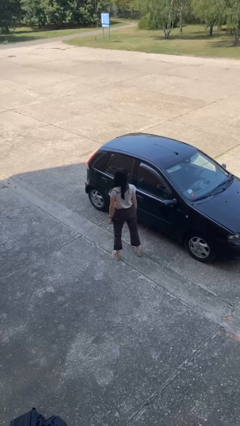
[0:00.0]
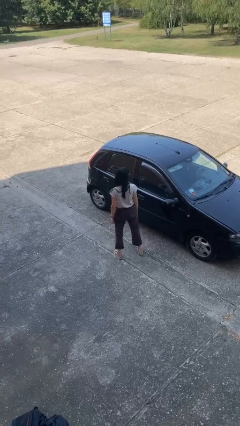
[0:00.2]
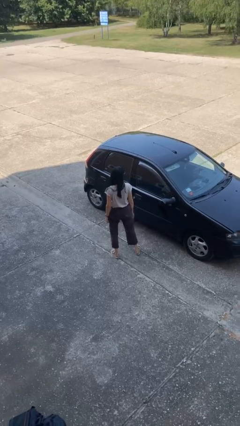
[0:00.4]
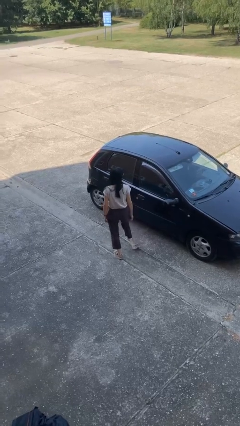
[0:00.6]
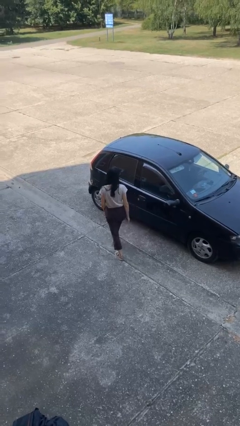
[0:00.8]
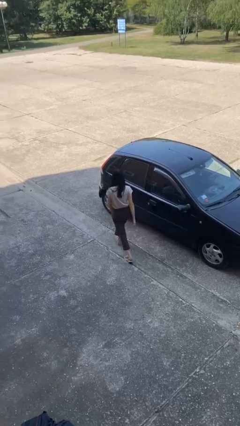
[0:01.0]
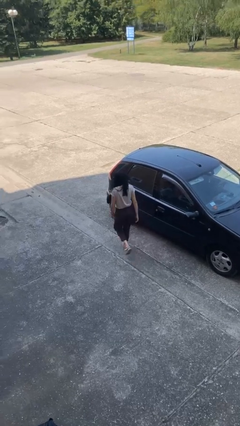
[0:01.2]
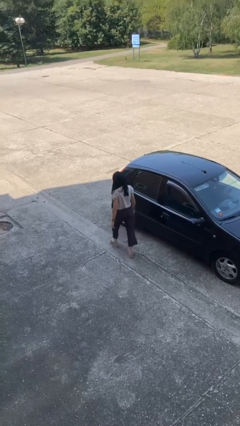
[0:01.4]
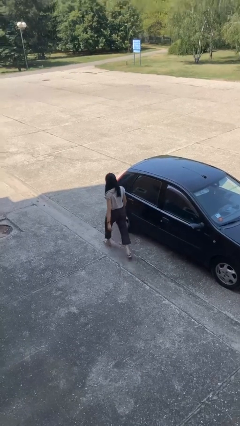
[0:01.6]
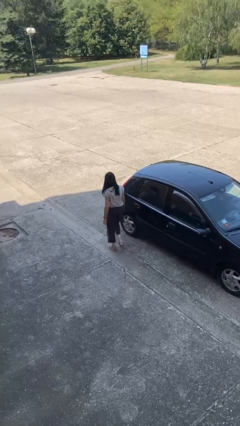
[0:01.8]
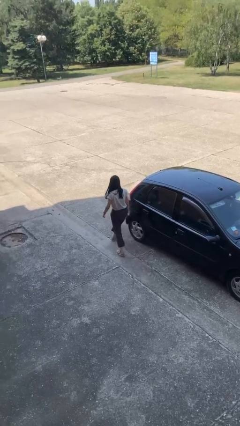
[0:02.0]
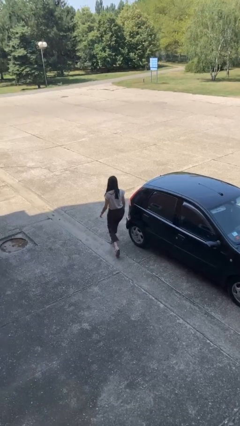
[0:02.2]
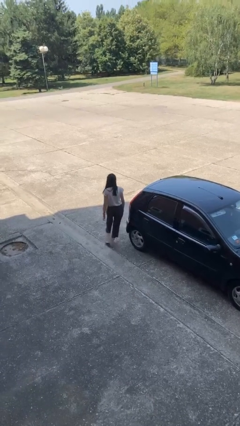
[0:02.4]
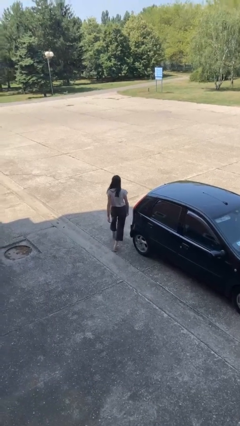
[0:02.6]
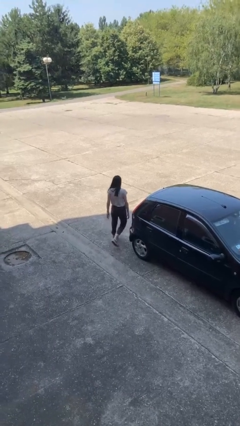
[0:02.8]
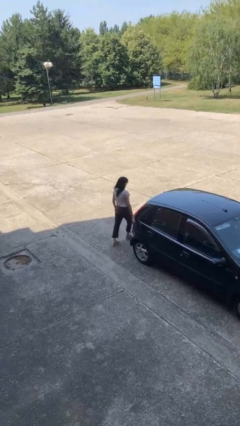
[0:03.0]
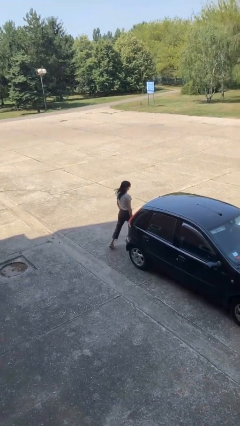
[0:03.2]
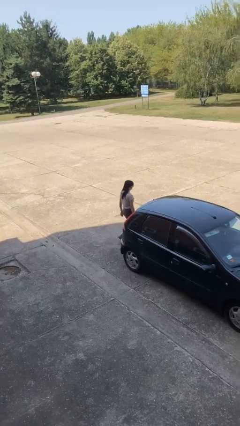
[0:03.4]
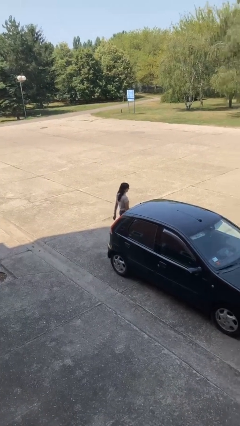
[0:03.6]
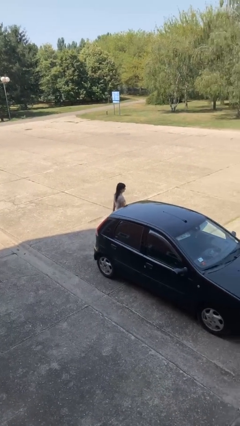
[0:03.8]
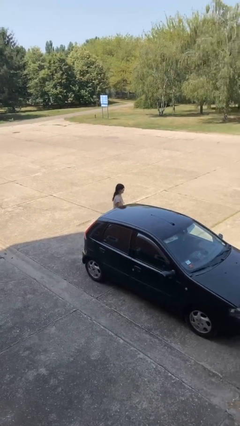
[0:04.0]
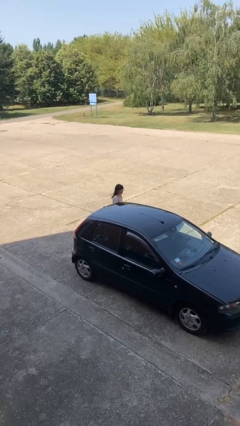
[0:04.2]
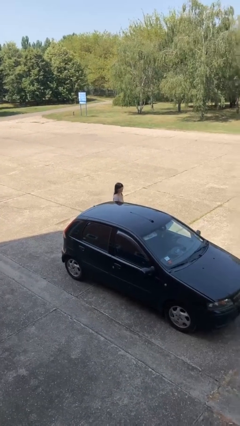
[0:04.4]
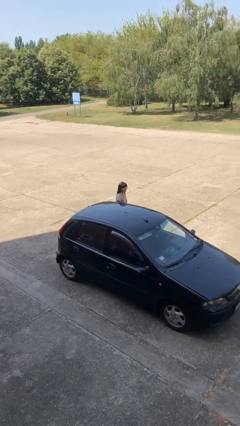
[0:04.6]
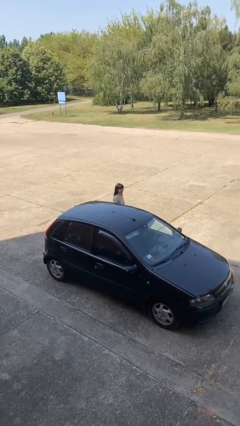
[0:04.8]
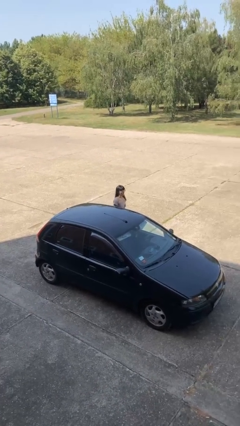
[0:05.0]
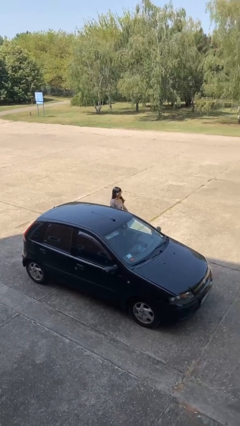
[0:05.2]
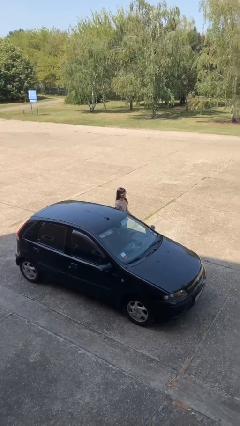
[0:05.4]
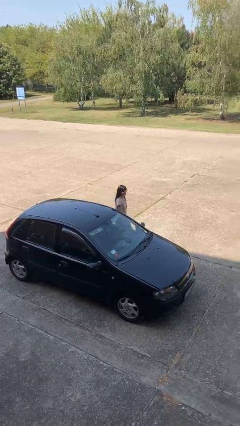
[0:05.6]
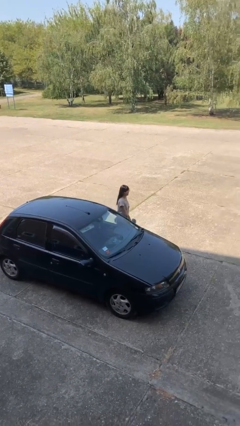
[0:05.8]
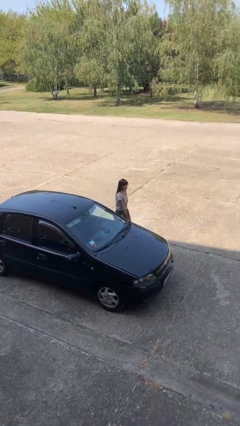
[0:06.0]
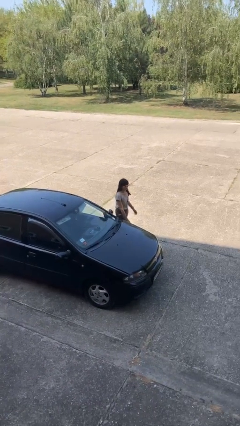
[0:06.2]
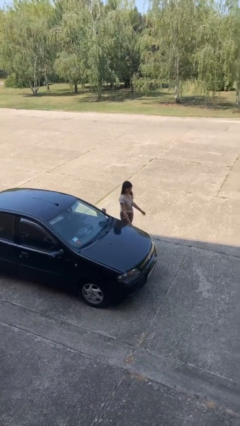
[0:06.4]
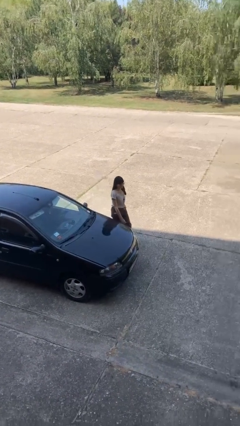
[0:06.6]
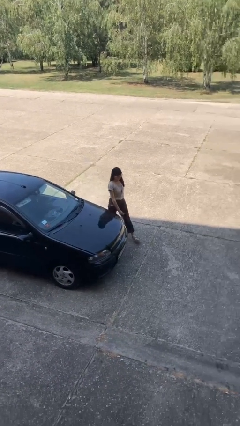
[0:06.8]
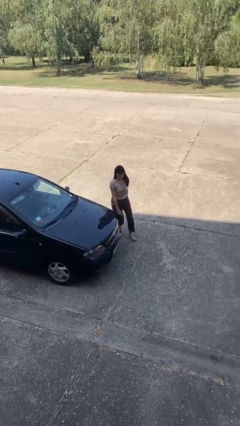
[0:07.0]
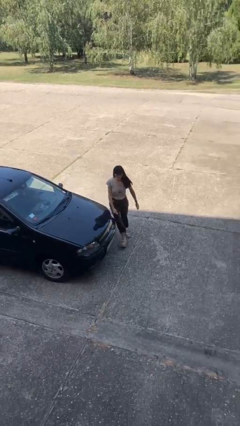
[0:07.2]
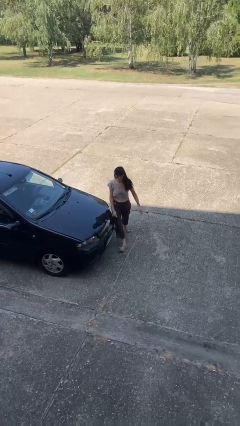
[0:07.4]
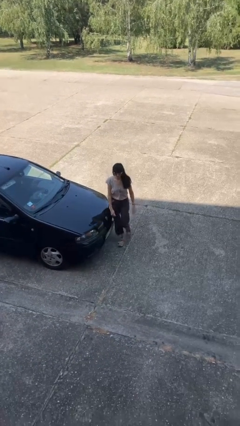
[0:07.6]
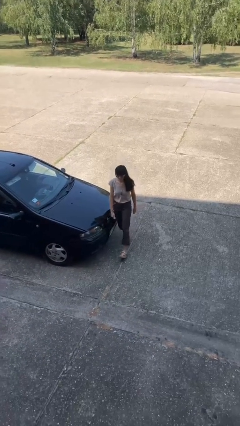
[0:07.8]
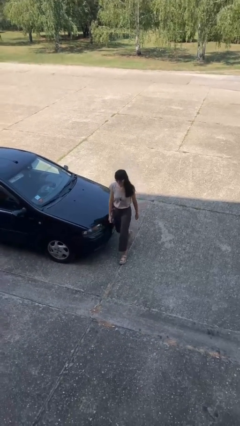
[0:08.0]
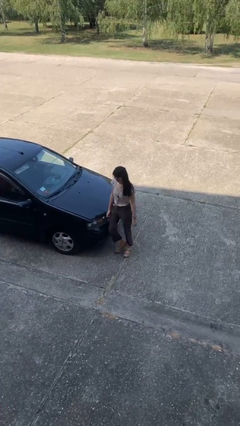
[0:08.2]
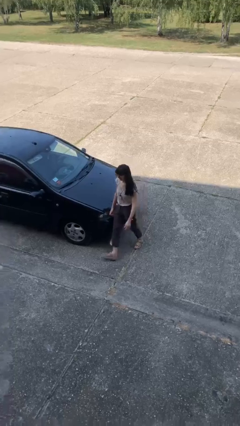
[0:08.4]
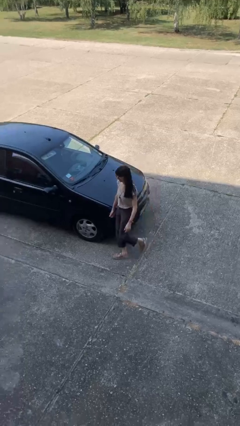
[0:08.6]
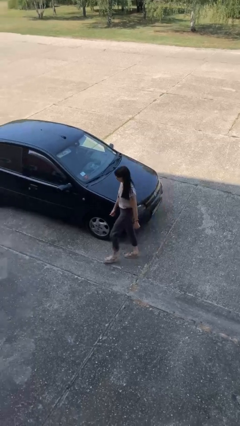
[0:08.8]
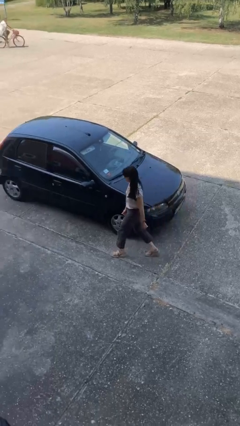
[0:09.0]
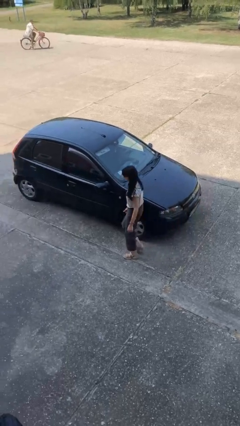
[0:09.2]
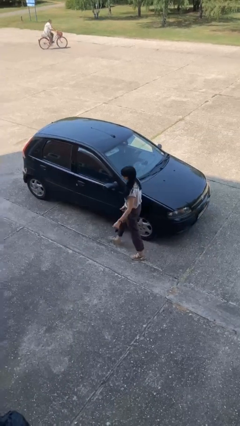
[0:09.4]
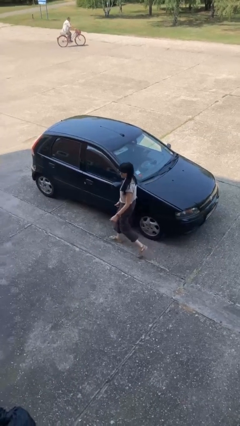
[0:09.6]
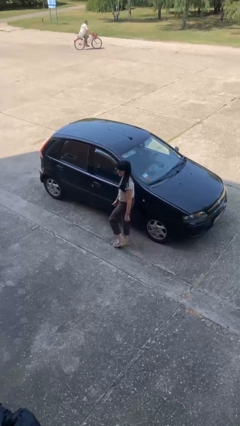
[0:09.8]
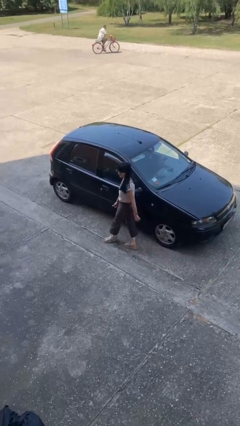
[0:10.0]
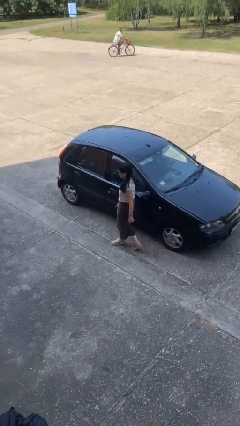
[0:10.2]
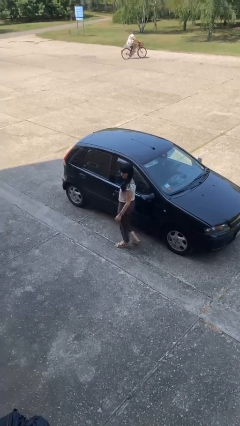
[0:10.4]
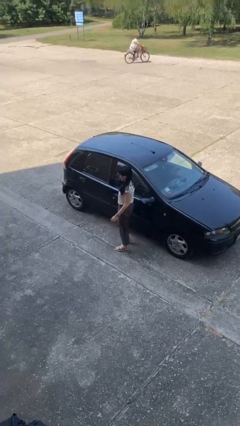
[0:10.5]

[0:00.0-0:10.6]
person walks around car

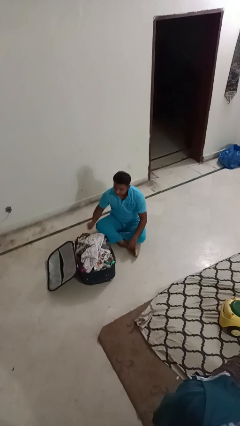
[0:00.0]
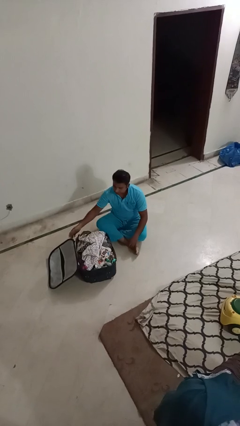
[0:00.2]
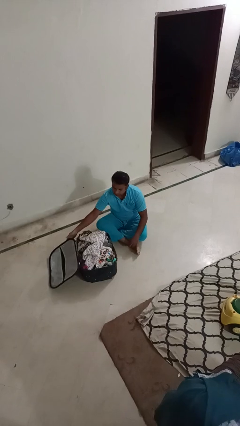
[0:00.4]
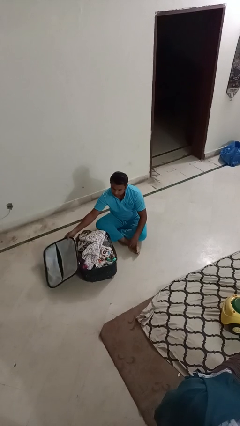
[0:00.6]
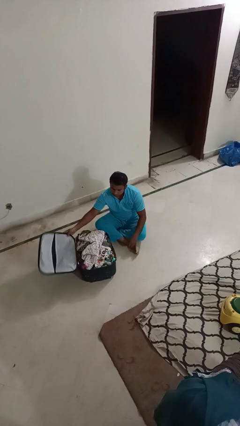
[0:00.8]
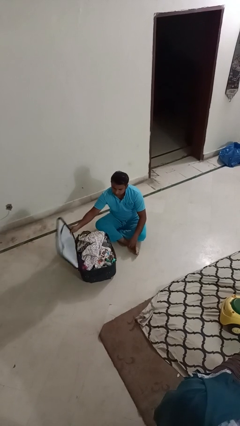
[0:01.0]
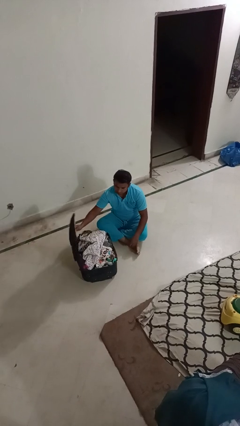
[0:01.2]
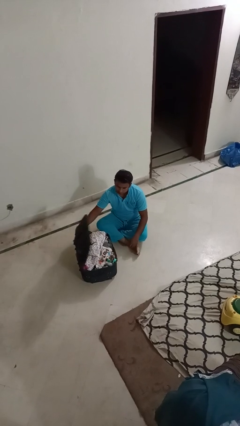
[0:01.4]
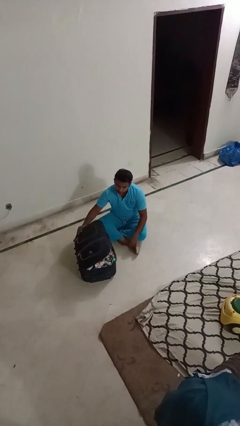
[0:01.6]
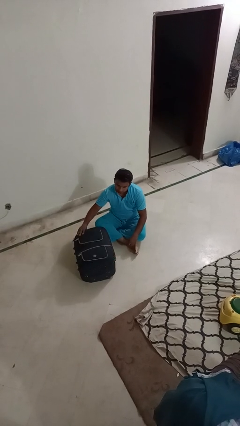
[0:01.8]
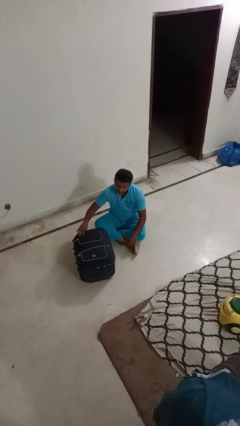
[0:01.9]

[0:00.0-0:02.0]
person closes suitcase

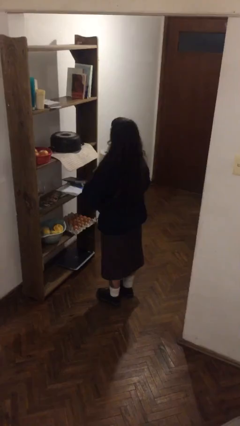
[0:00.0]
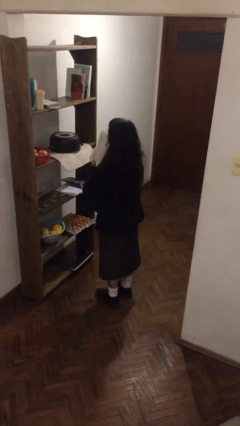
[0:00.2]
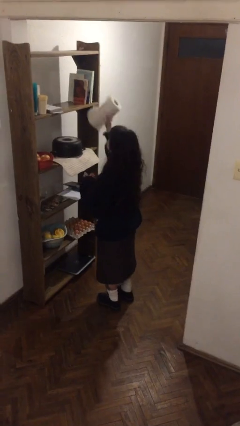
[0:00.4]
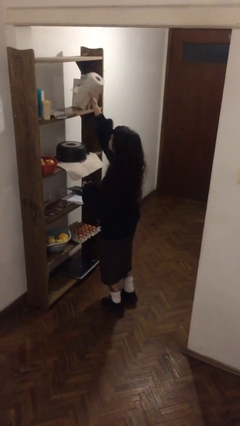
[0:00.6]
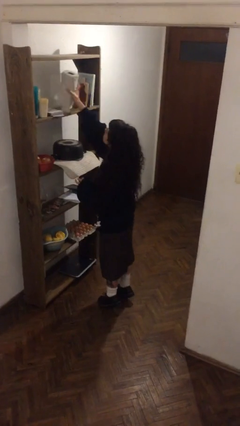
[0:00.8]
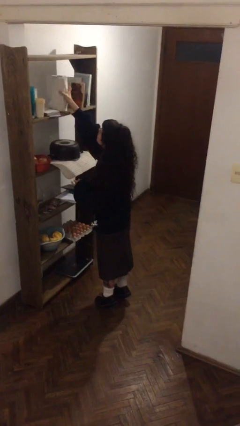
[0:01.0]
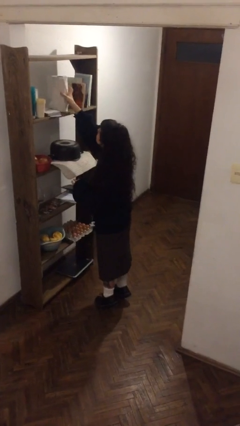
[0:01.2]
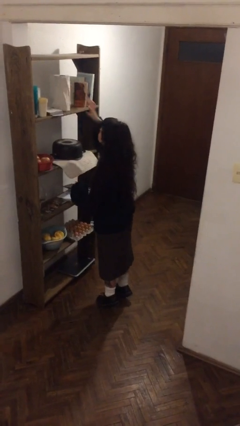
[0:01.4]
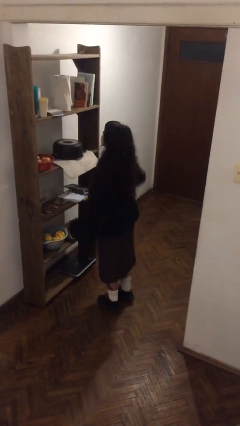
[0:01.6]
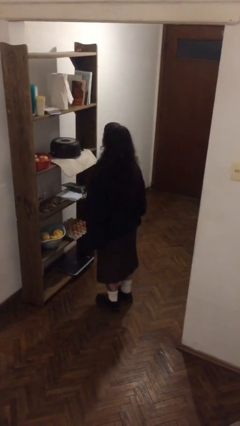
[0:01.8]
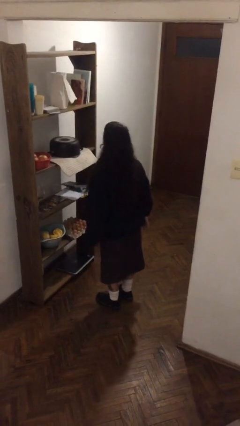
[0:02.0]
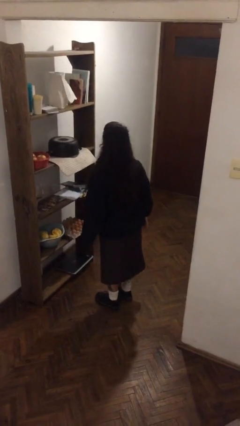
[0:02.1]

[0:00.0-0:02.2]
person puts down object on shelf

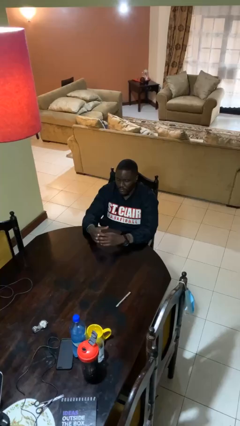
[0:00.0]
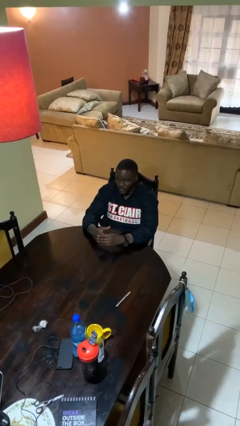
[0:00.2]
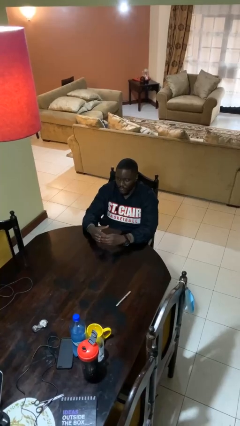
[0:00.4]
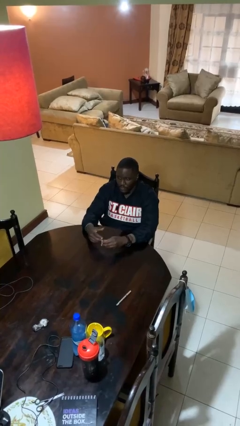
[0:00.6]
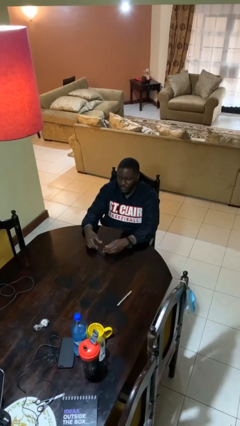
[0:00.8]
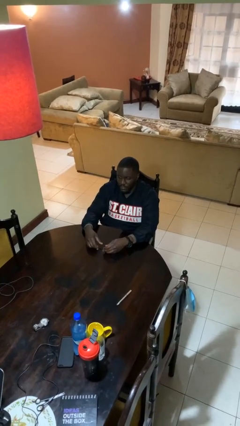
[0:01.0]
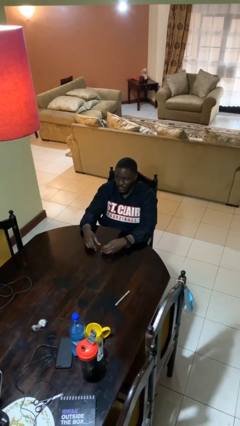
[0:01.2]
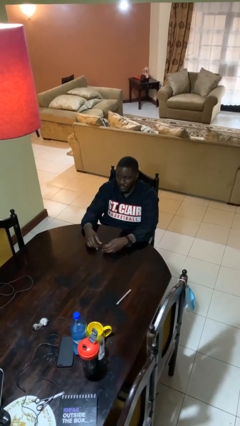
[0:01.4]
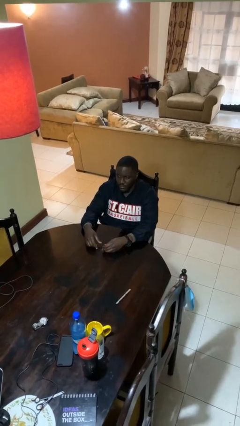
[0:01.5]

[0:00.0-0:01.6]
person takes off ring

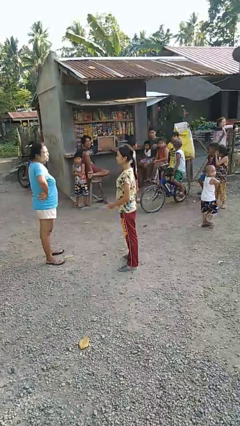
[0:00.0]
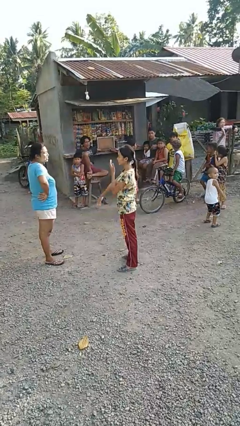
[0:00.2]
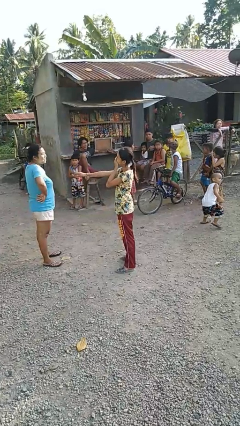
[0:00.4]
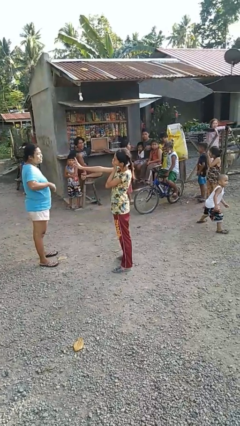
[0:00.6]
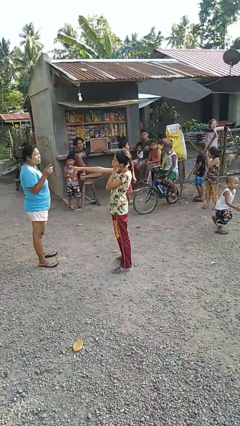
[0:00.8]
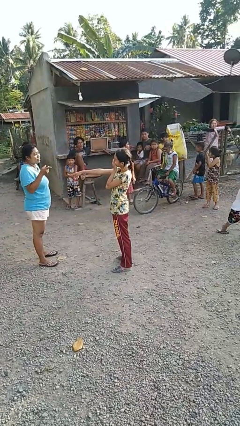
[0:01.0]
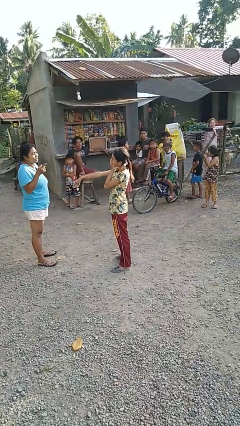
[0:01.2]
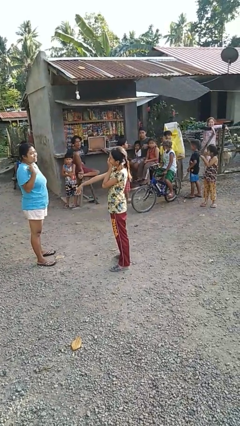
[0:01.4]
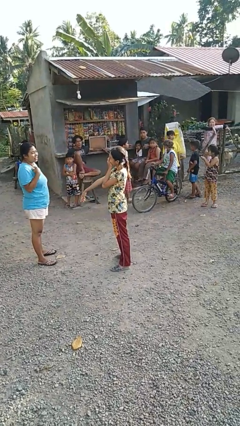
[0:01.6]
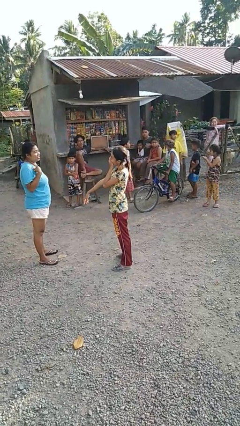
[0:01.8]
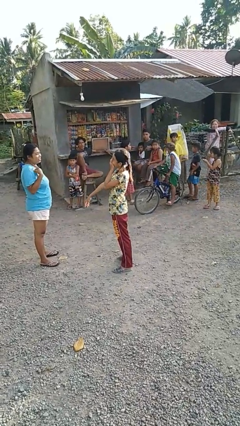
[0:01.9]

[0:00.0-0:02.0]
person laughs with person
